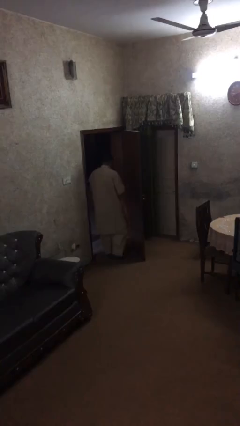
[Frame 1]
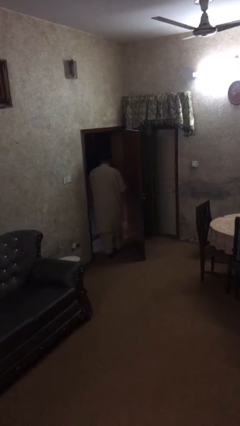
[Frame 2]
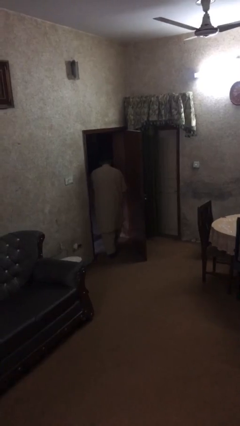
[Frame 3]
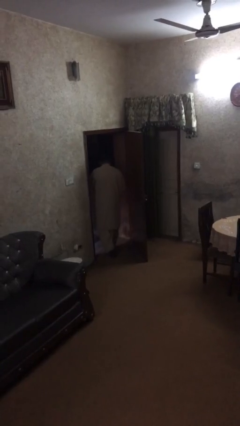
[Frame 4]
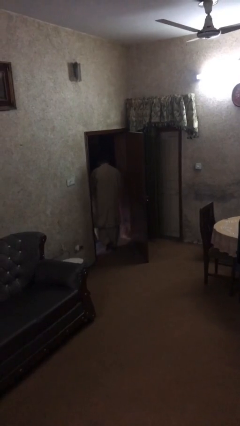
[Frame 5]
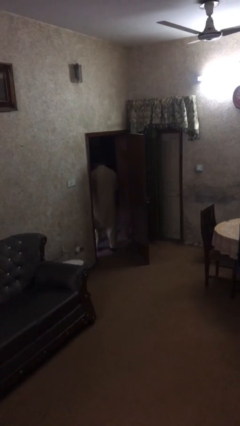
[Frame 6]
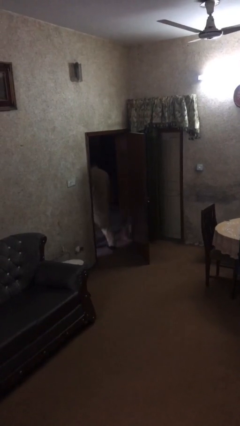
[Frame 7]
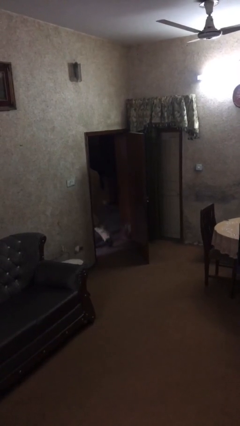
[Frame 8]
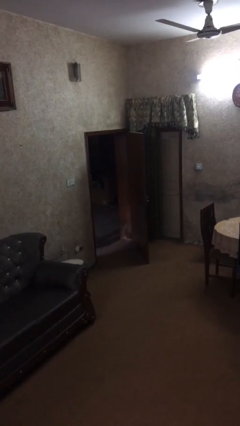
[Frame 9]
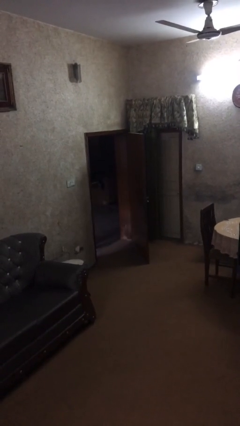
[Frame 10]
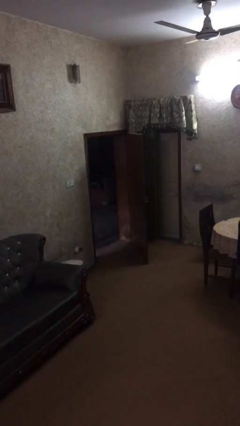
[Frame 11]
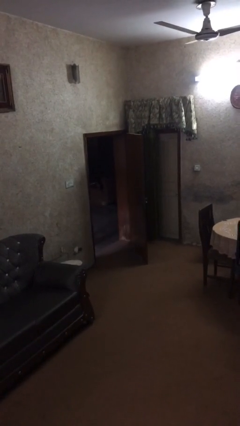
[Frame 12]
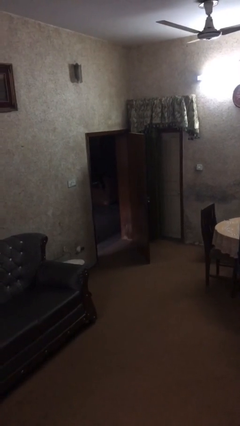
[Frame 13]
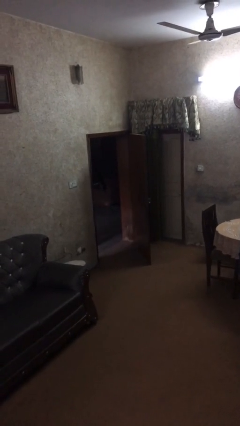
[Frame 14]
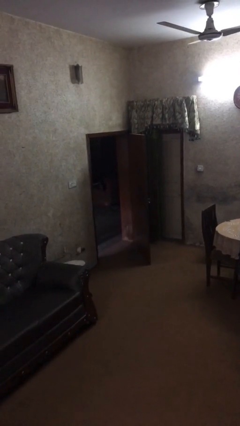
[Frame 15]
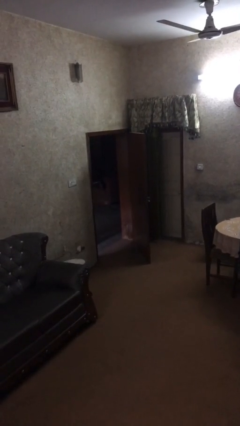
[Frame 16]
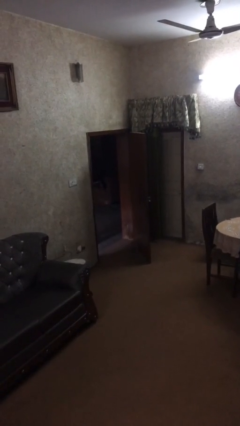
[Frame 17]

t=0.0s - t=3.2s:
person exits scene through structure

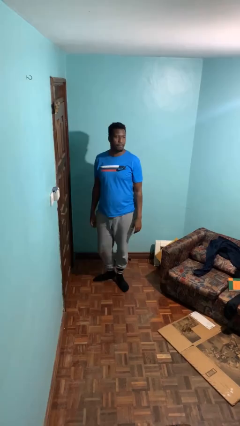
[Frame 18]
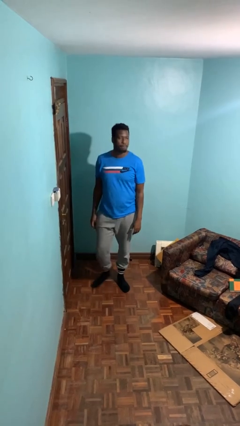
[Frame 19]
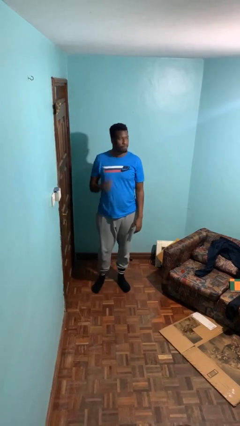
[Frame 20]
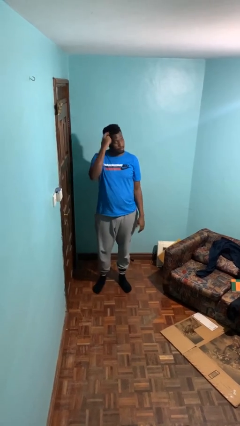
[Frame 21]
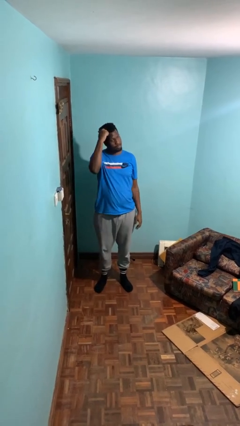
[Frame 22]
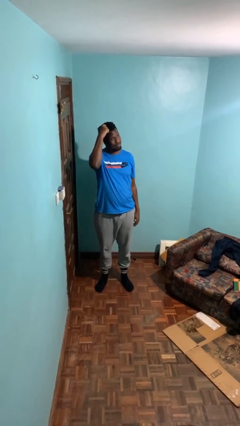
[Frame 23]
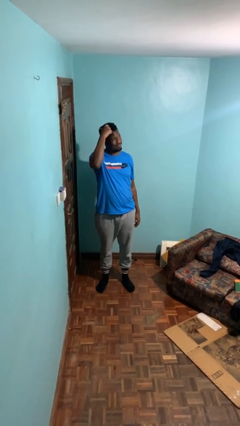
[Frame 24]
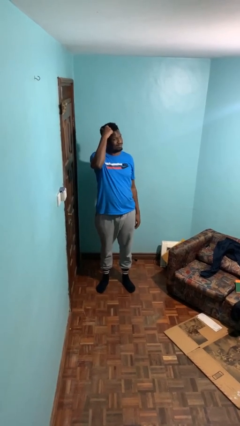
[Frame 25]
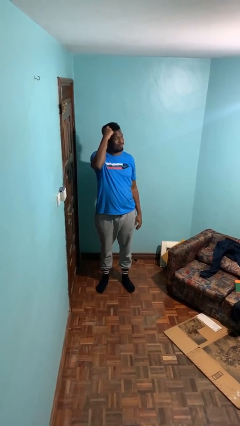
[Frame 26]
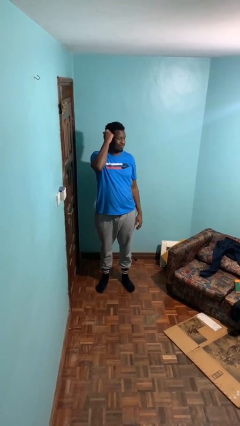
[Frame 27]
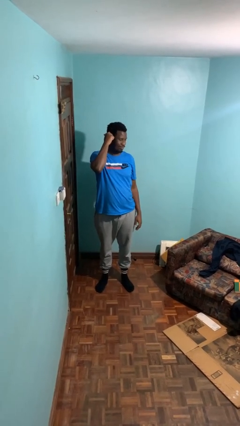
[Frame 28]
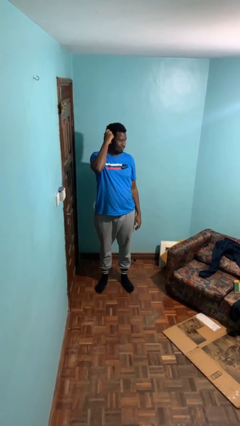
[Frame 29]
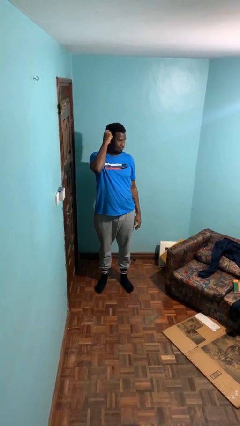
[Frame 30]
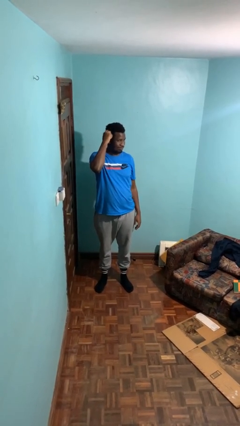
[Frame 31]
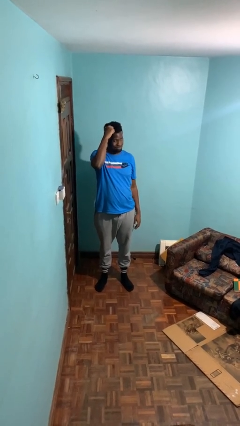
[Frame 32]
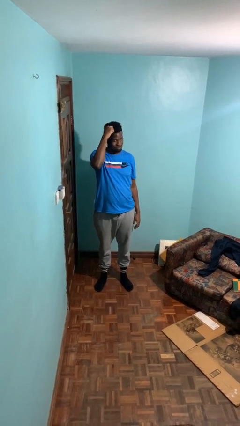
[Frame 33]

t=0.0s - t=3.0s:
person scratches face

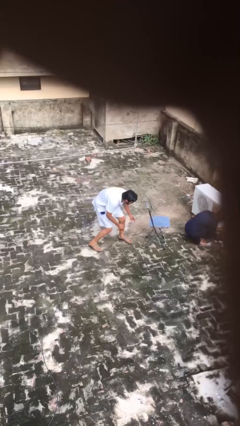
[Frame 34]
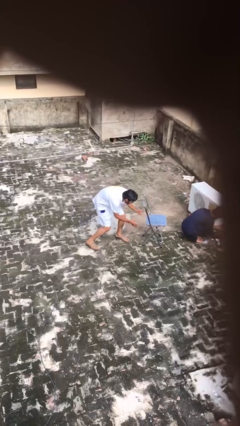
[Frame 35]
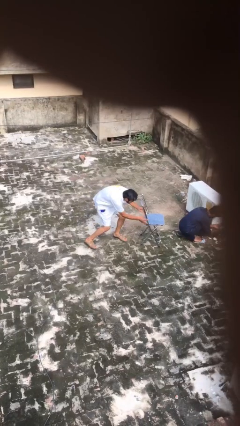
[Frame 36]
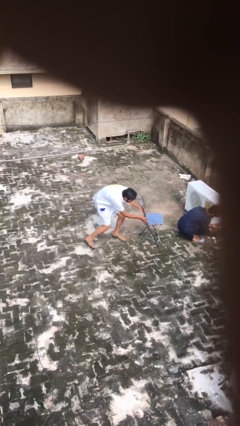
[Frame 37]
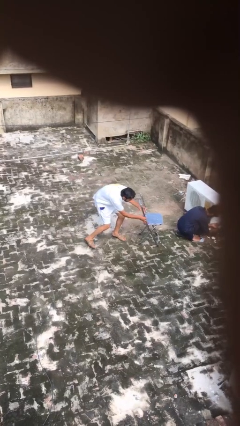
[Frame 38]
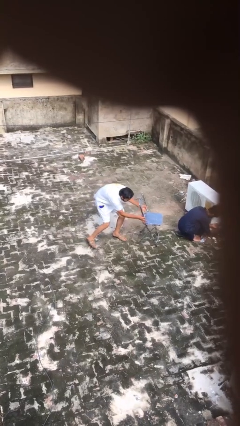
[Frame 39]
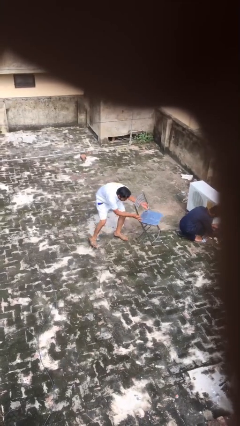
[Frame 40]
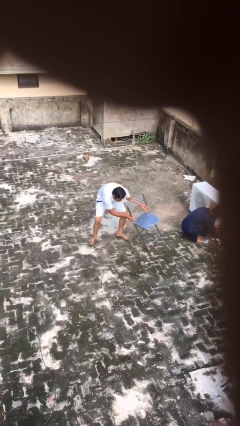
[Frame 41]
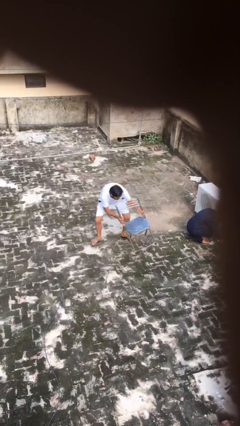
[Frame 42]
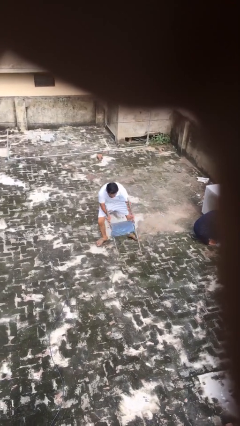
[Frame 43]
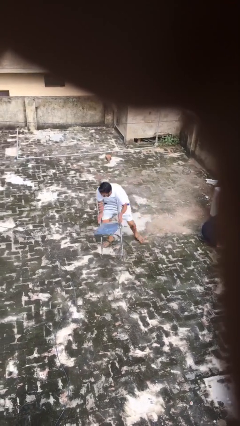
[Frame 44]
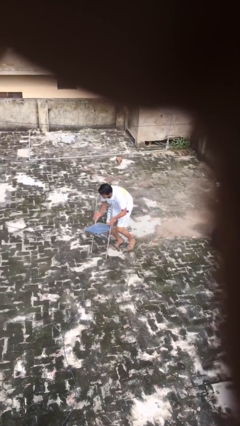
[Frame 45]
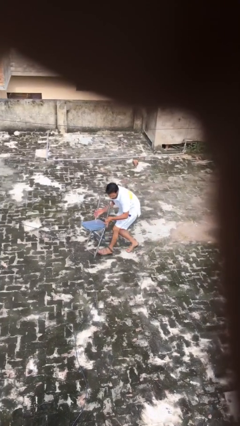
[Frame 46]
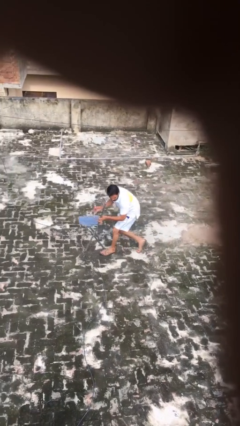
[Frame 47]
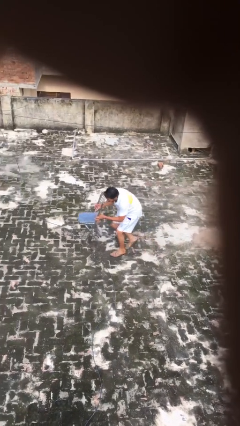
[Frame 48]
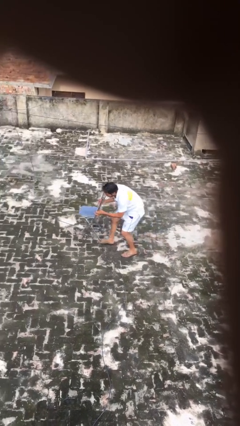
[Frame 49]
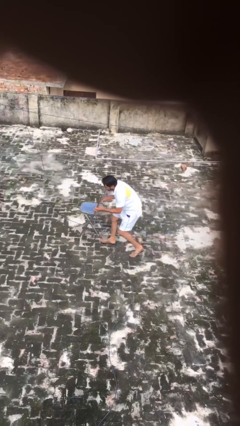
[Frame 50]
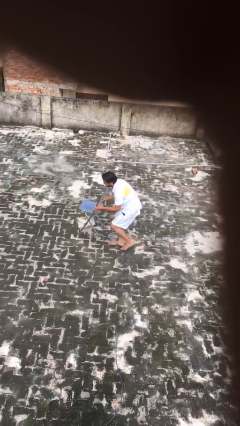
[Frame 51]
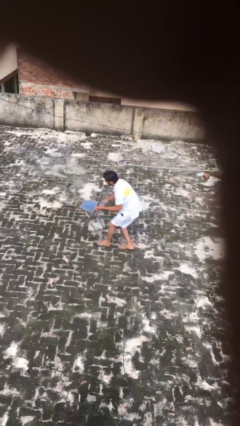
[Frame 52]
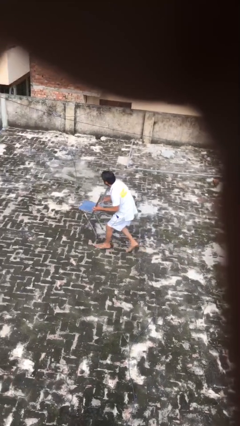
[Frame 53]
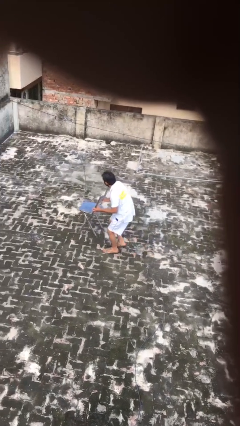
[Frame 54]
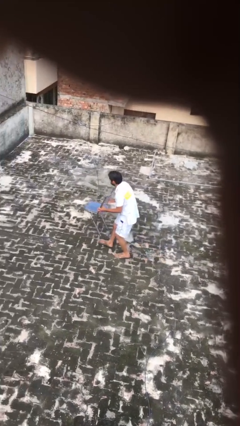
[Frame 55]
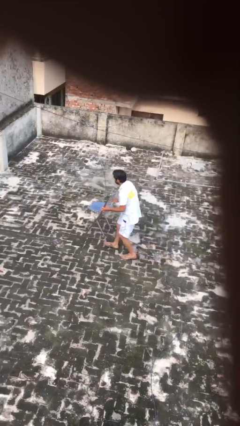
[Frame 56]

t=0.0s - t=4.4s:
person steals object from person

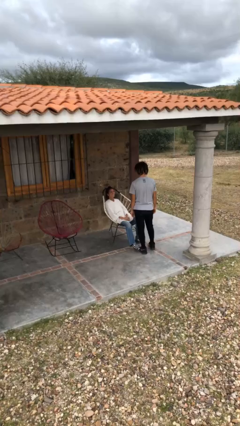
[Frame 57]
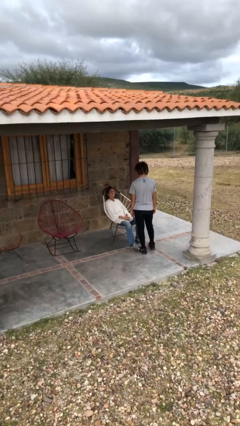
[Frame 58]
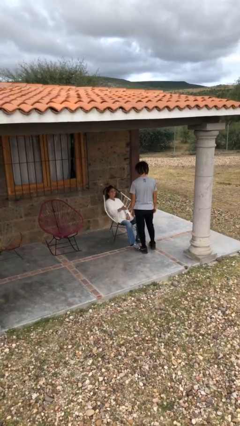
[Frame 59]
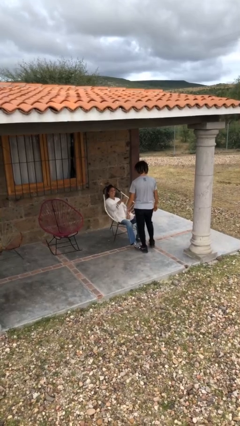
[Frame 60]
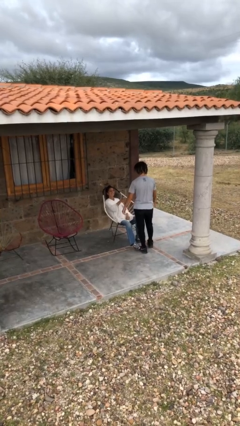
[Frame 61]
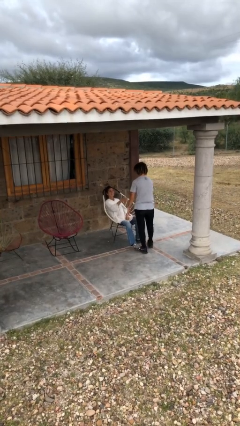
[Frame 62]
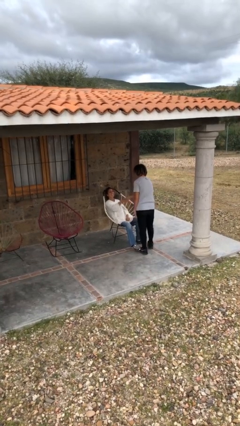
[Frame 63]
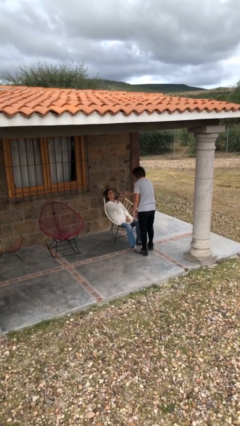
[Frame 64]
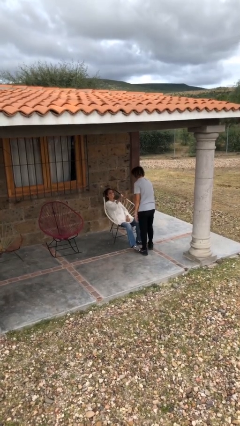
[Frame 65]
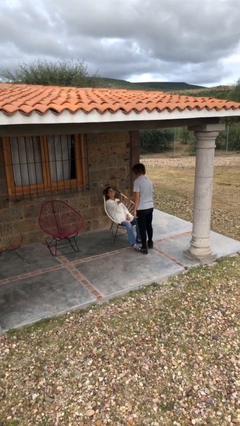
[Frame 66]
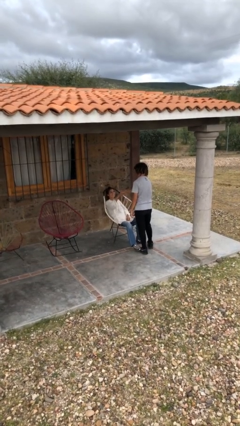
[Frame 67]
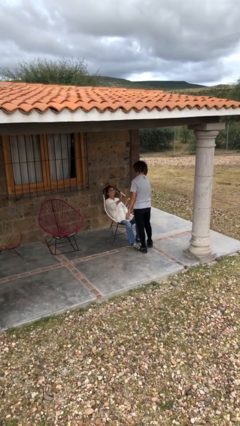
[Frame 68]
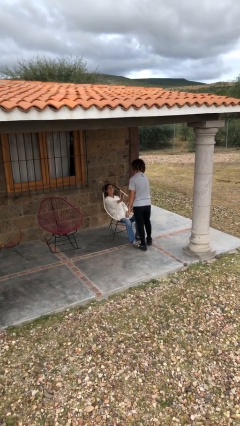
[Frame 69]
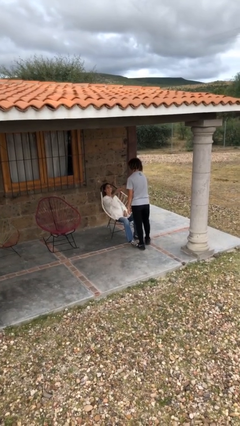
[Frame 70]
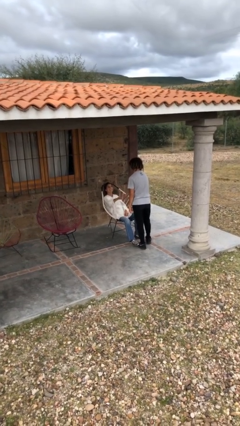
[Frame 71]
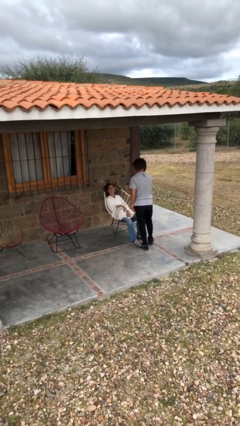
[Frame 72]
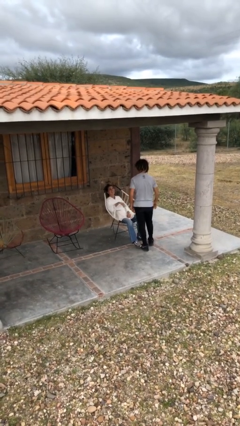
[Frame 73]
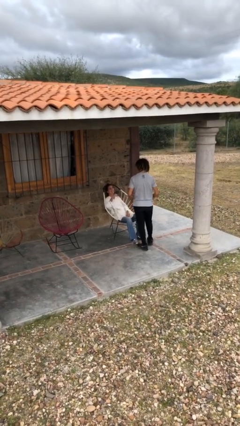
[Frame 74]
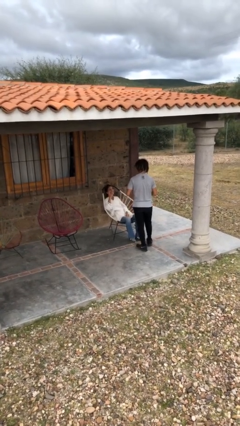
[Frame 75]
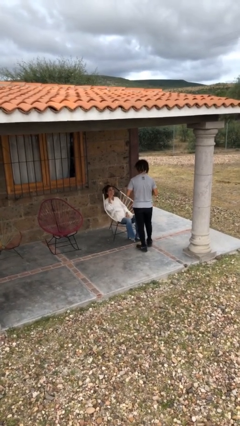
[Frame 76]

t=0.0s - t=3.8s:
person shakes hand

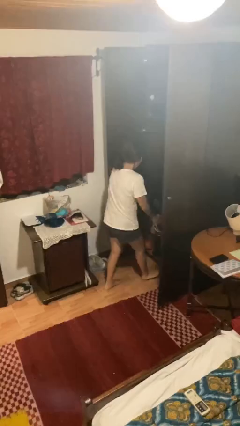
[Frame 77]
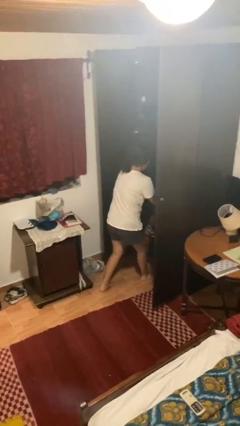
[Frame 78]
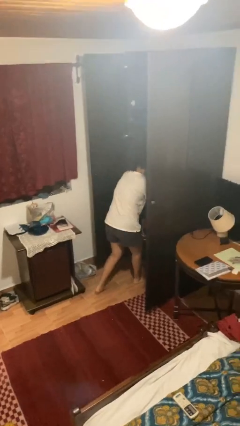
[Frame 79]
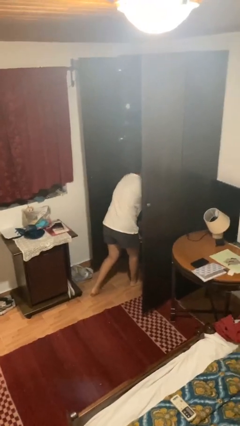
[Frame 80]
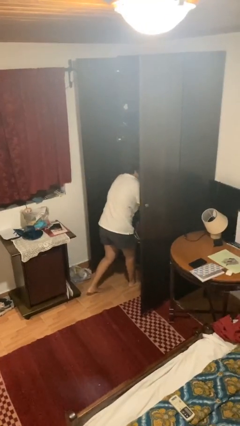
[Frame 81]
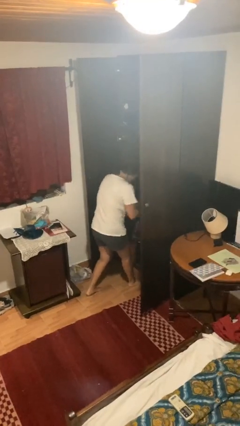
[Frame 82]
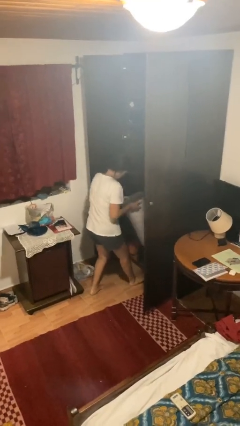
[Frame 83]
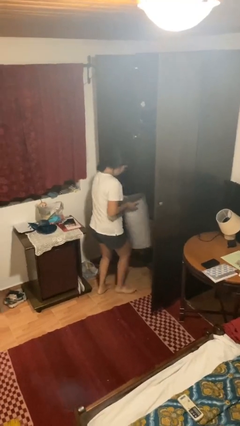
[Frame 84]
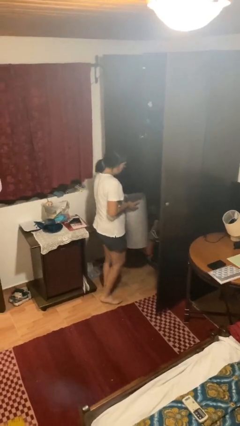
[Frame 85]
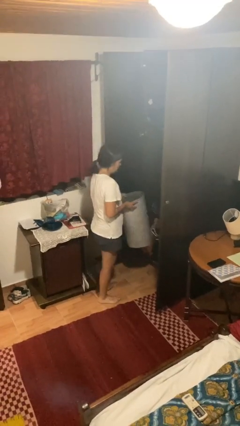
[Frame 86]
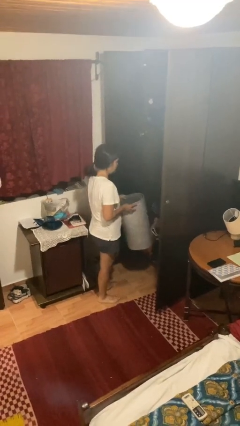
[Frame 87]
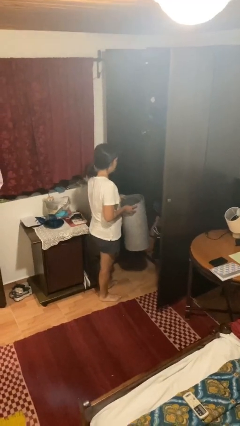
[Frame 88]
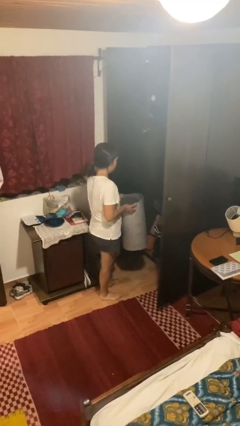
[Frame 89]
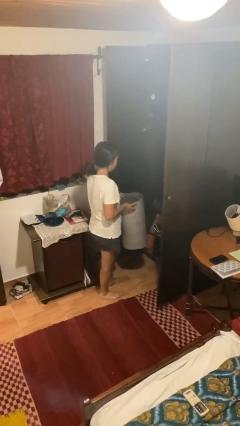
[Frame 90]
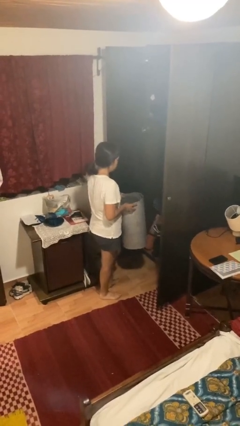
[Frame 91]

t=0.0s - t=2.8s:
person picks up object from cabinet

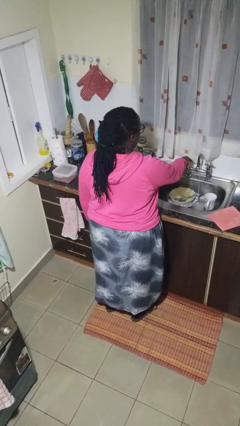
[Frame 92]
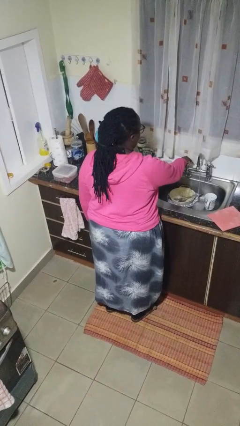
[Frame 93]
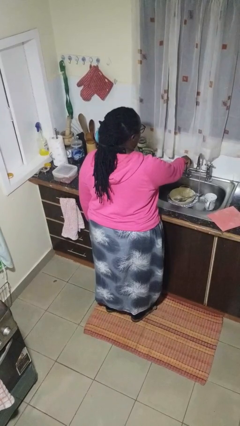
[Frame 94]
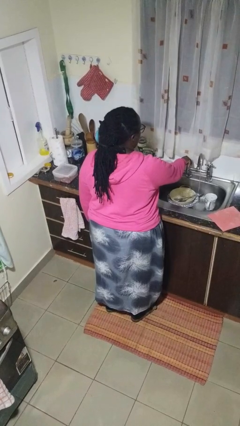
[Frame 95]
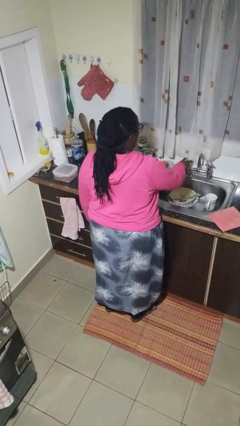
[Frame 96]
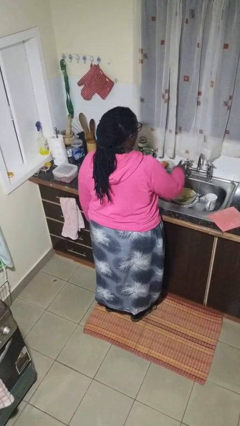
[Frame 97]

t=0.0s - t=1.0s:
person turns off faucet
